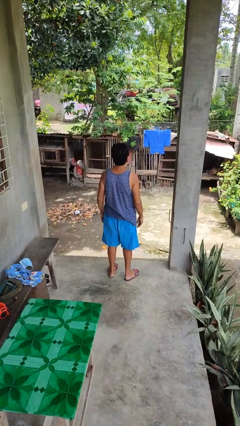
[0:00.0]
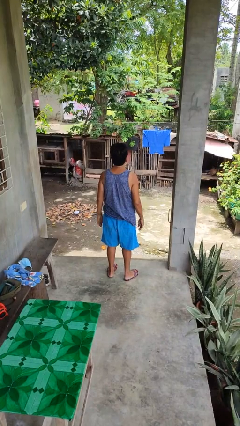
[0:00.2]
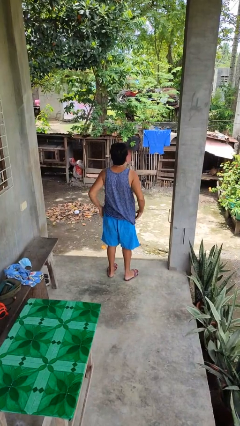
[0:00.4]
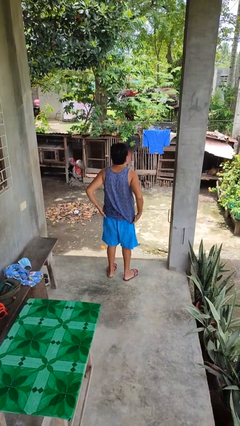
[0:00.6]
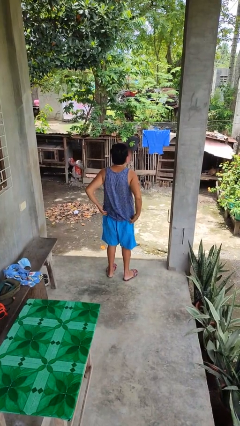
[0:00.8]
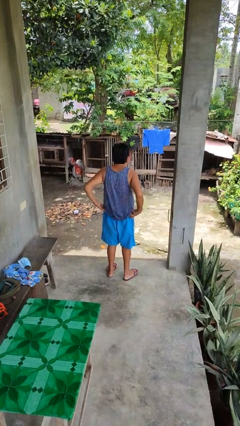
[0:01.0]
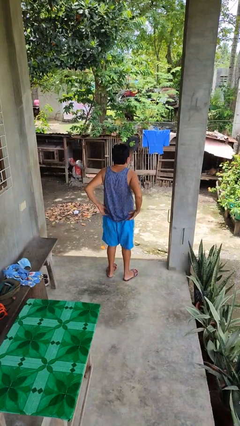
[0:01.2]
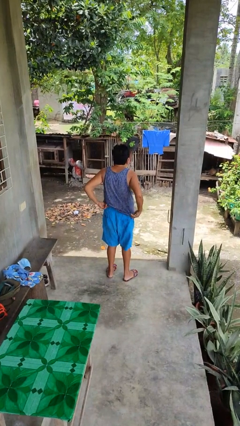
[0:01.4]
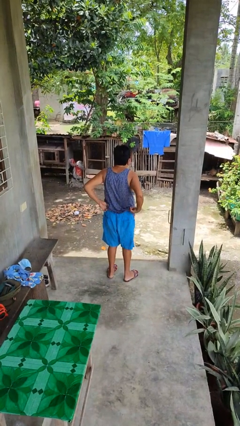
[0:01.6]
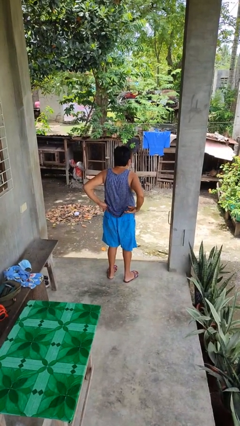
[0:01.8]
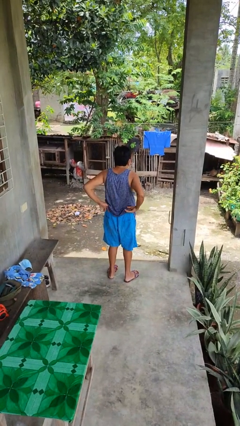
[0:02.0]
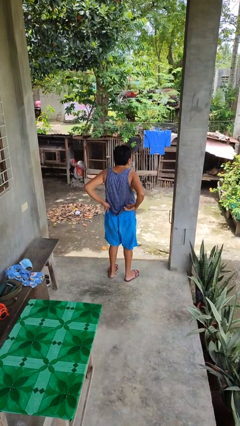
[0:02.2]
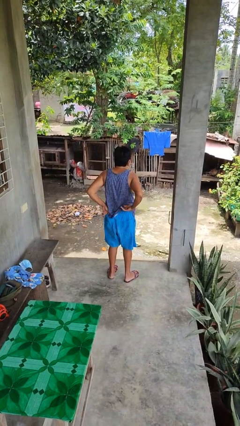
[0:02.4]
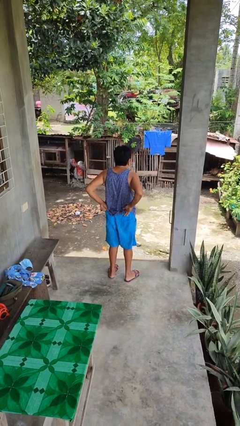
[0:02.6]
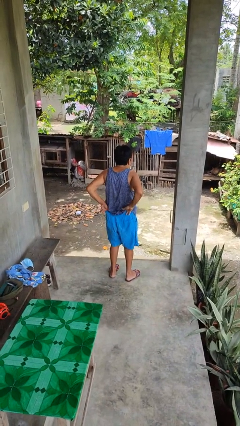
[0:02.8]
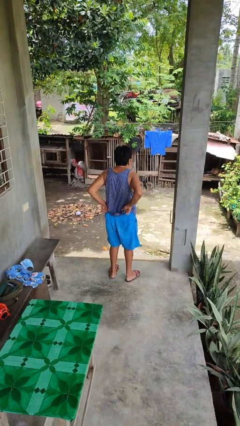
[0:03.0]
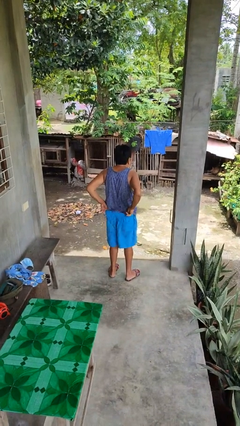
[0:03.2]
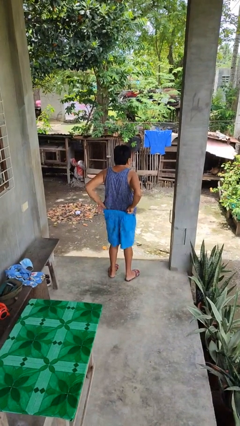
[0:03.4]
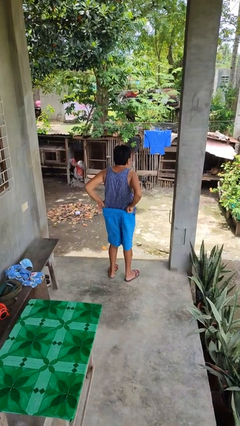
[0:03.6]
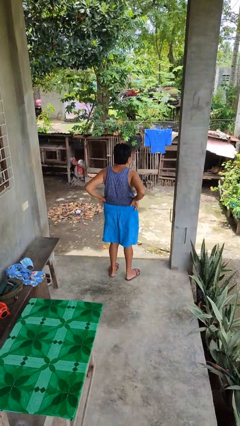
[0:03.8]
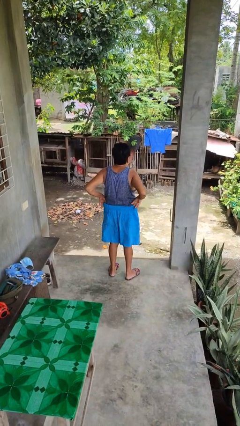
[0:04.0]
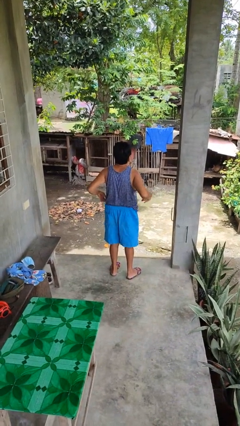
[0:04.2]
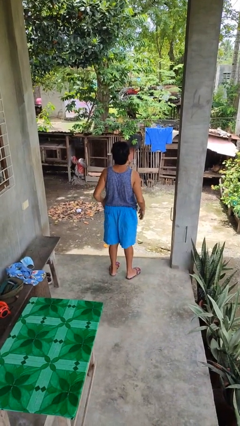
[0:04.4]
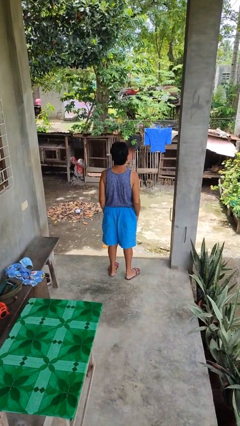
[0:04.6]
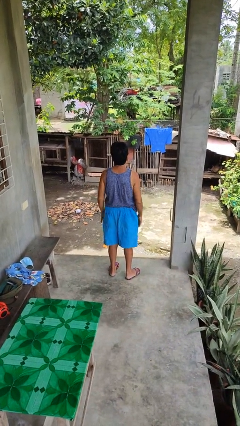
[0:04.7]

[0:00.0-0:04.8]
person tucks in shirt

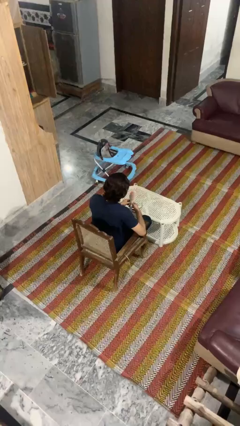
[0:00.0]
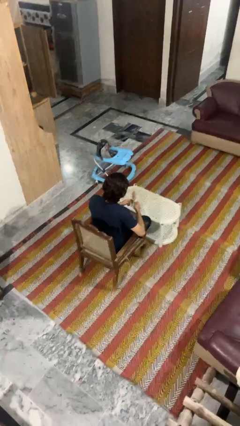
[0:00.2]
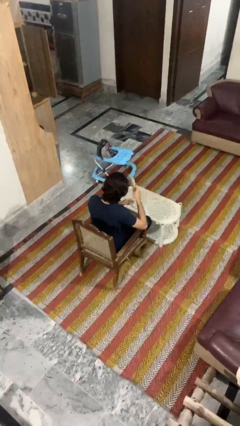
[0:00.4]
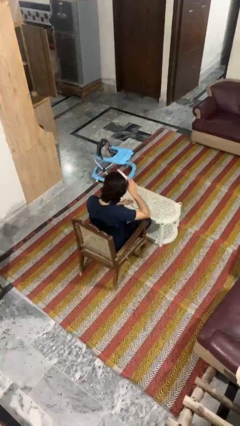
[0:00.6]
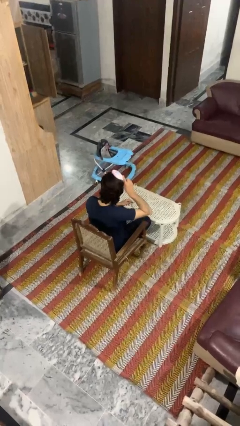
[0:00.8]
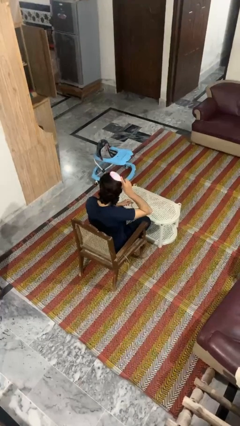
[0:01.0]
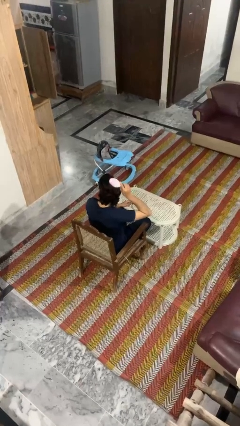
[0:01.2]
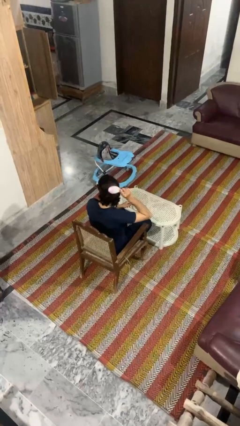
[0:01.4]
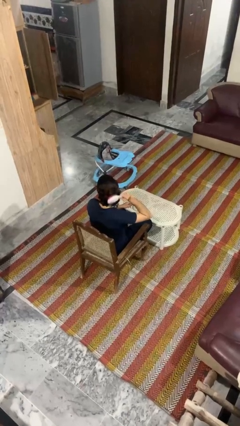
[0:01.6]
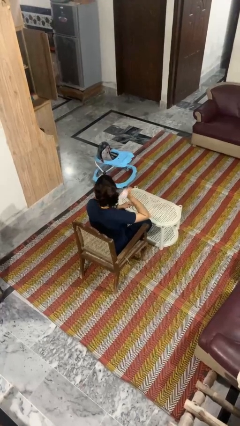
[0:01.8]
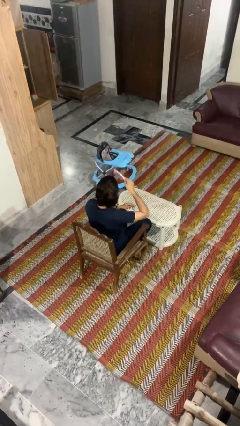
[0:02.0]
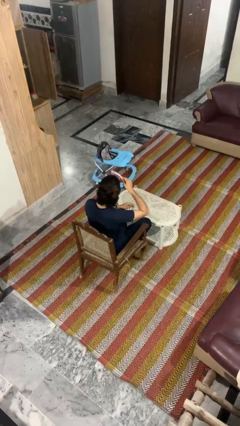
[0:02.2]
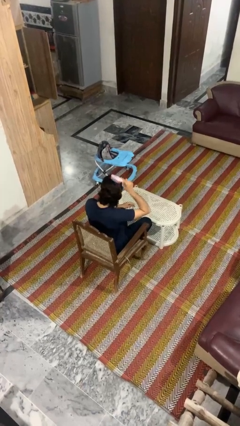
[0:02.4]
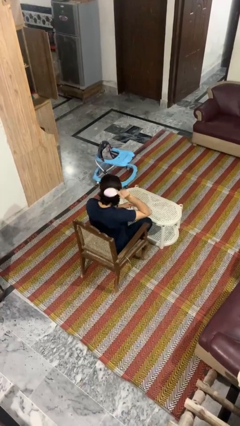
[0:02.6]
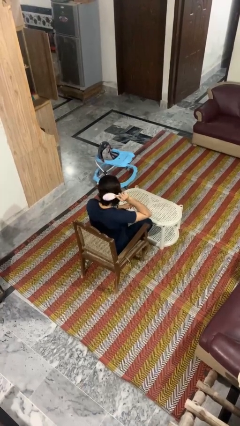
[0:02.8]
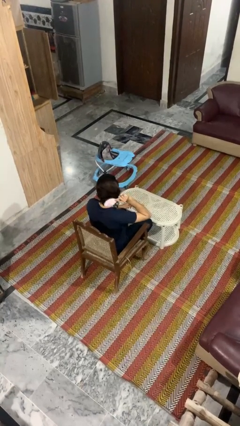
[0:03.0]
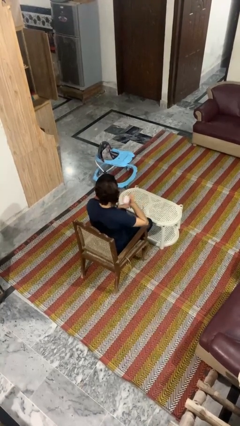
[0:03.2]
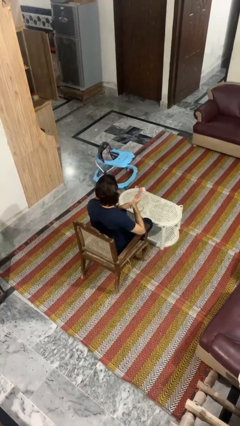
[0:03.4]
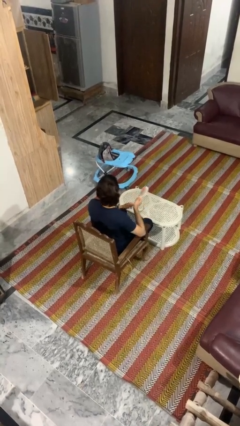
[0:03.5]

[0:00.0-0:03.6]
person brushes hair

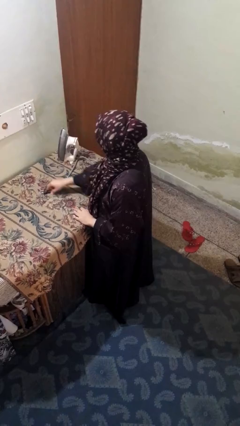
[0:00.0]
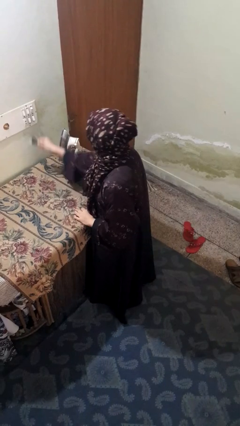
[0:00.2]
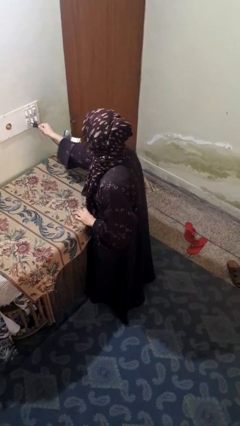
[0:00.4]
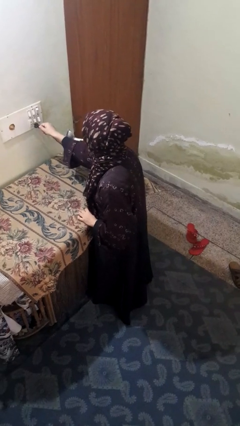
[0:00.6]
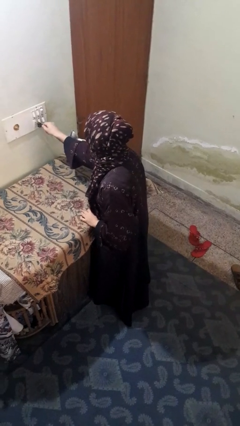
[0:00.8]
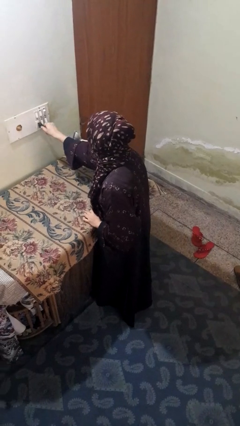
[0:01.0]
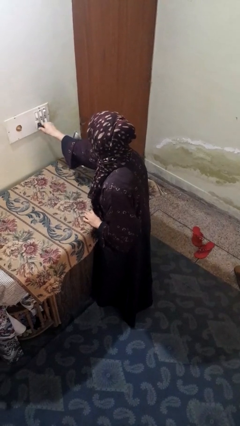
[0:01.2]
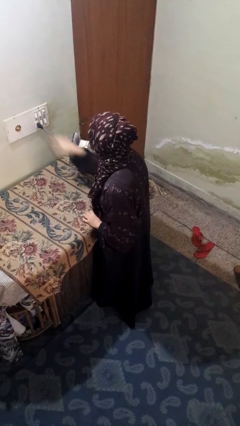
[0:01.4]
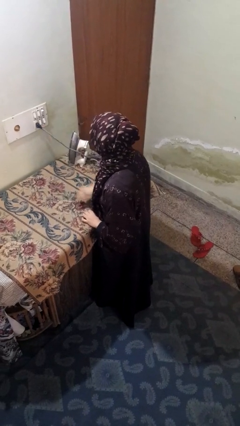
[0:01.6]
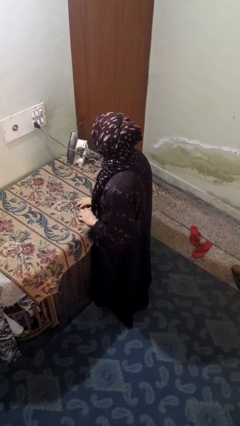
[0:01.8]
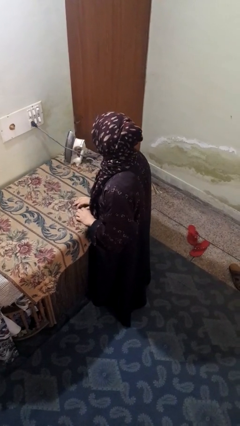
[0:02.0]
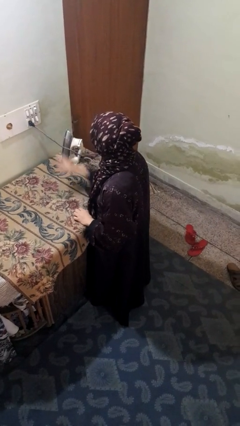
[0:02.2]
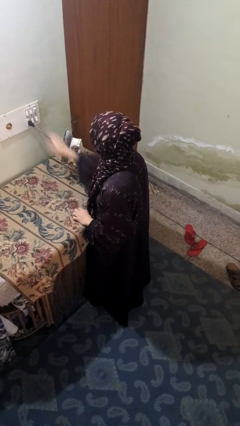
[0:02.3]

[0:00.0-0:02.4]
person plugs into electrical socket

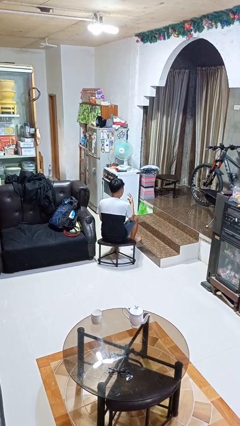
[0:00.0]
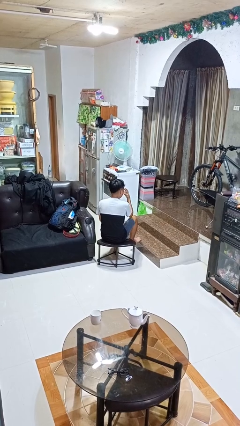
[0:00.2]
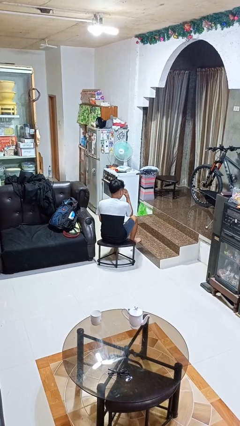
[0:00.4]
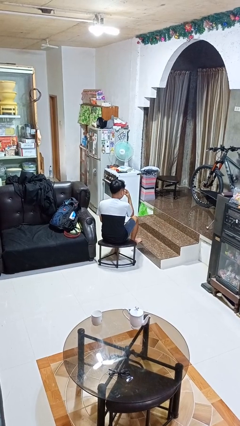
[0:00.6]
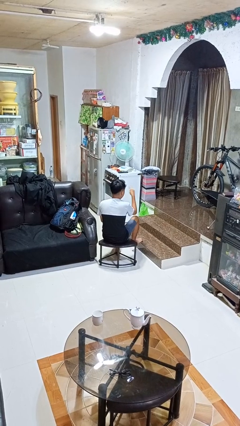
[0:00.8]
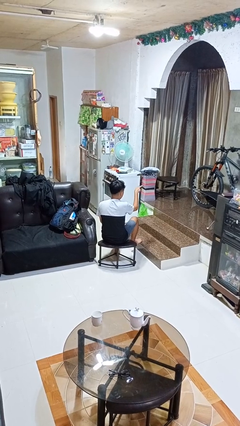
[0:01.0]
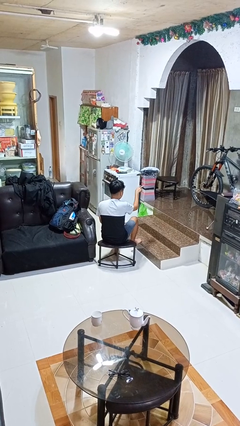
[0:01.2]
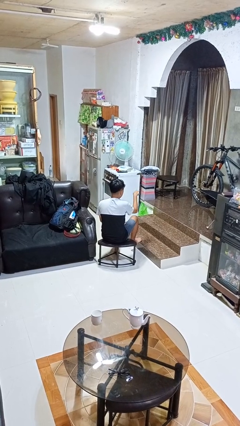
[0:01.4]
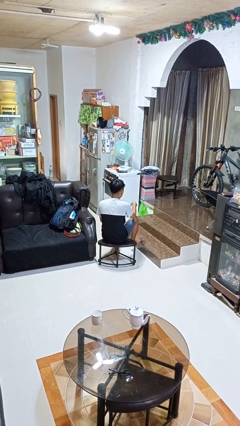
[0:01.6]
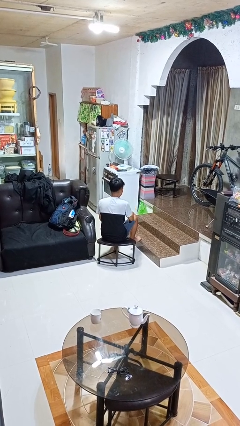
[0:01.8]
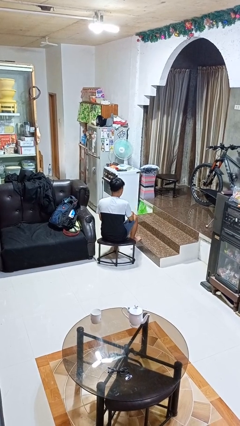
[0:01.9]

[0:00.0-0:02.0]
person gestures watch closely

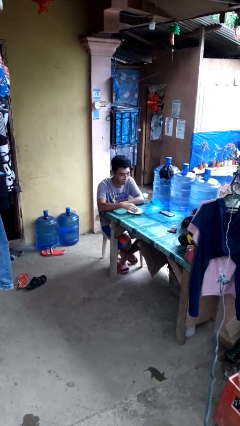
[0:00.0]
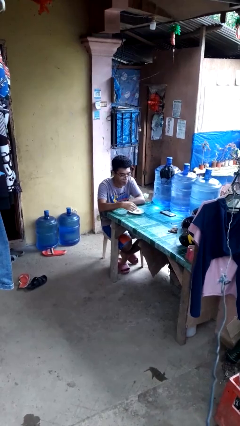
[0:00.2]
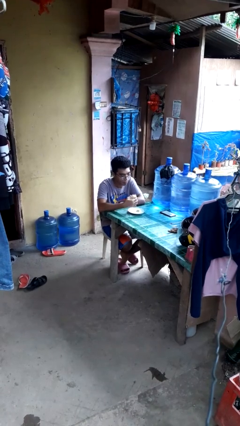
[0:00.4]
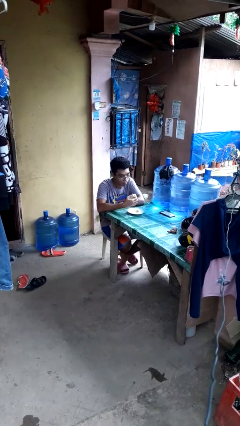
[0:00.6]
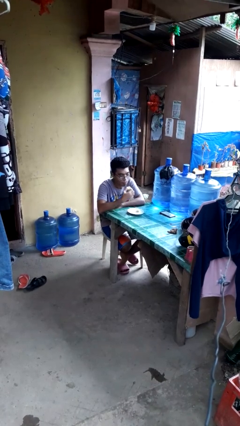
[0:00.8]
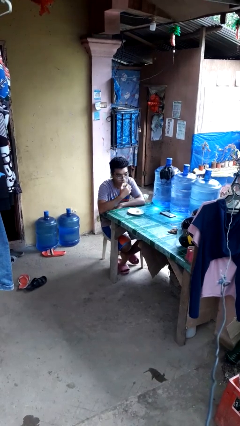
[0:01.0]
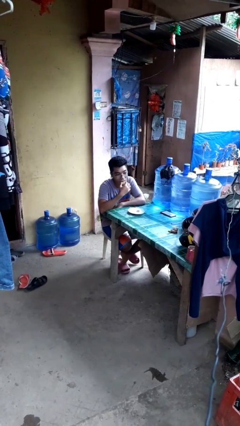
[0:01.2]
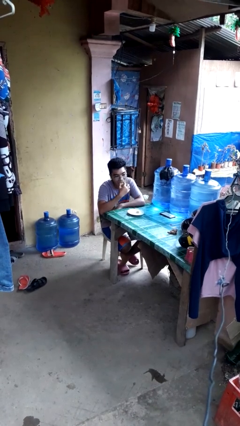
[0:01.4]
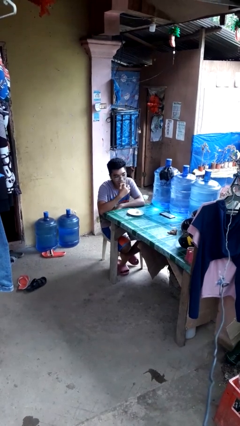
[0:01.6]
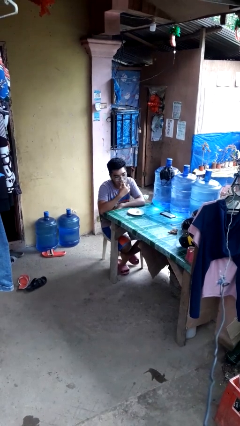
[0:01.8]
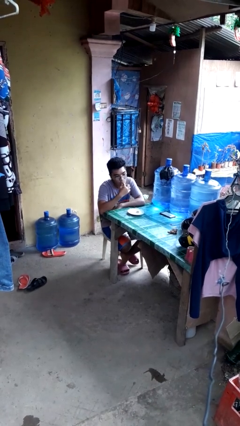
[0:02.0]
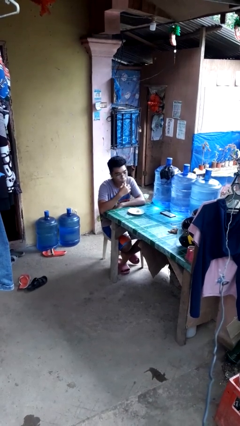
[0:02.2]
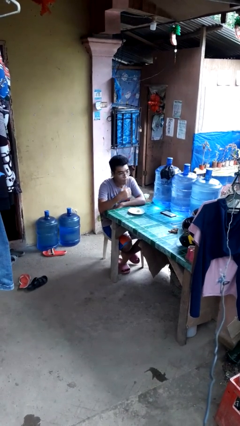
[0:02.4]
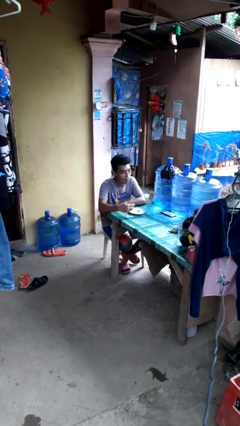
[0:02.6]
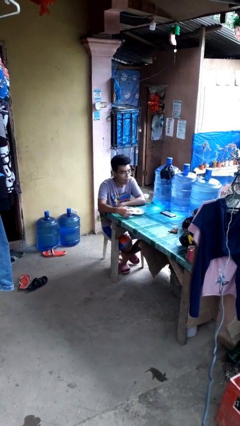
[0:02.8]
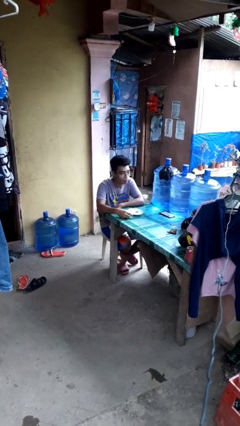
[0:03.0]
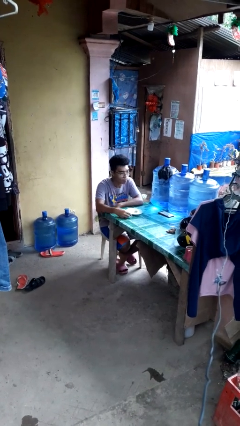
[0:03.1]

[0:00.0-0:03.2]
person eats with hands

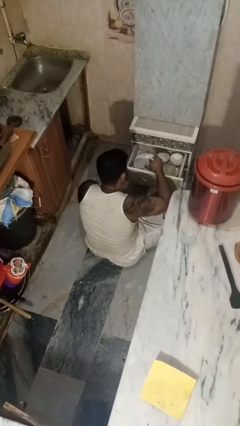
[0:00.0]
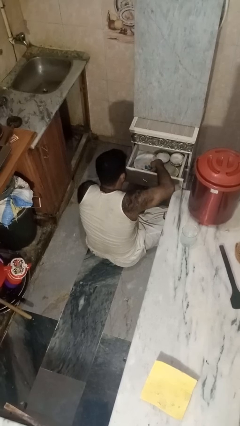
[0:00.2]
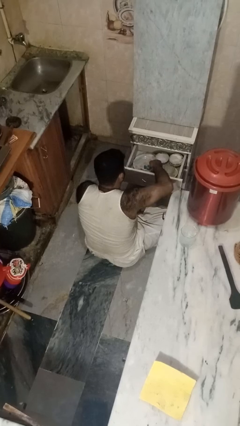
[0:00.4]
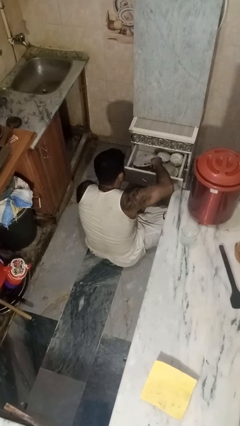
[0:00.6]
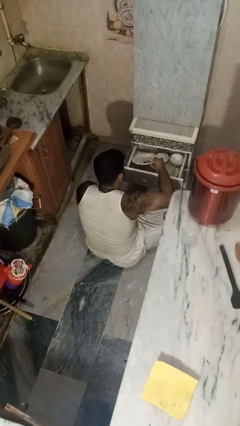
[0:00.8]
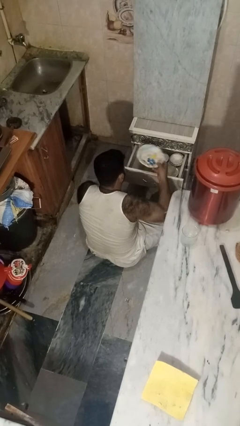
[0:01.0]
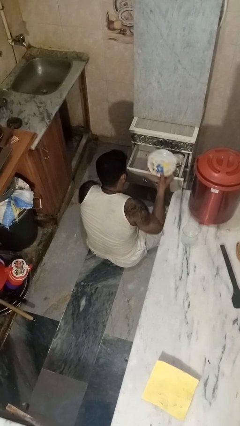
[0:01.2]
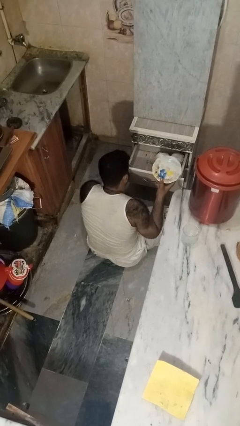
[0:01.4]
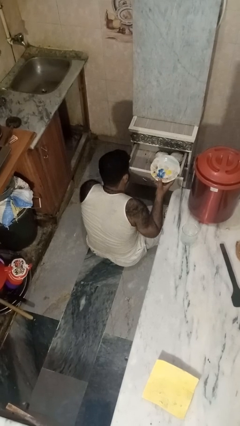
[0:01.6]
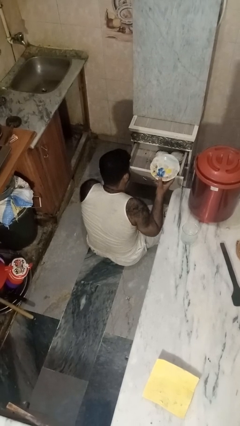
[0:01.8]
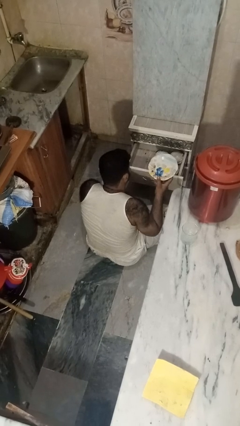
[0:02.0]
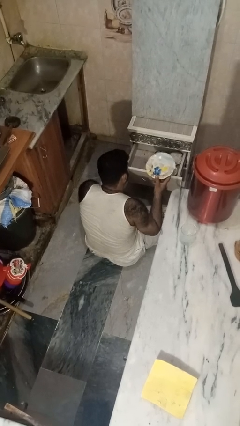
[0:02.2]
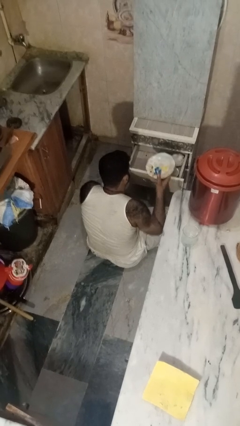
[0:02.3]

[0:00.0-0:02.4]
person takes object from kitchen drawer
